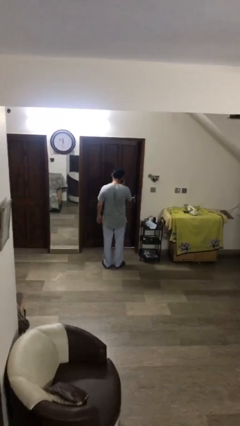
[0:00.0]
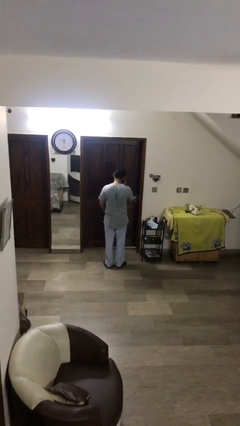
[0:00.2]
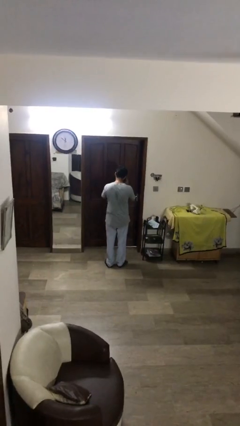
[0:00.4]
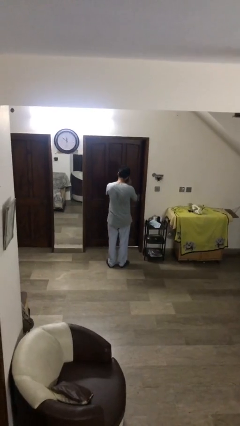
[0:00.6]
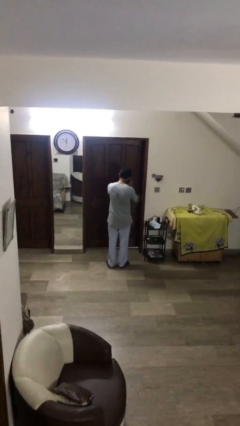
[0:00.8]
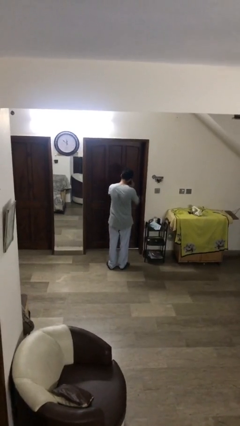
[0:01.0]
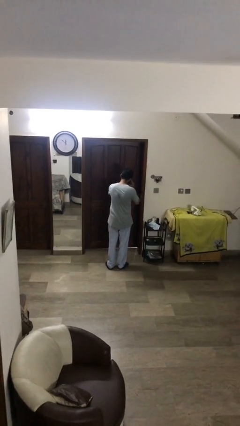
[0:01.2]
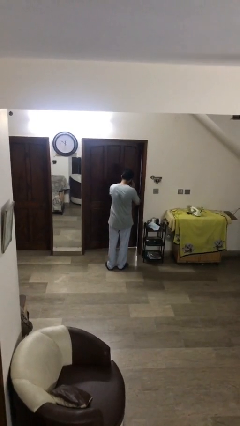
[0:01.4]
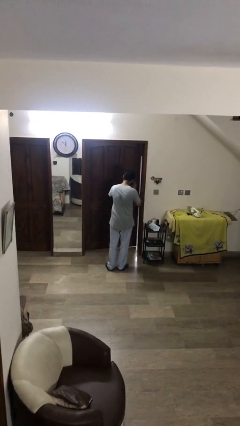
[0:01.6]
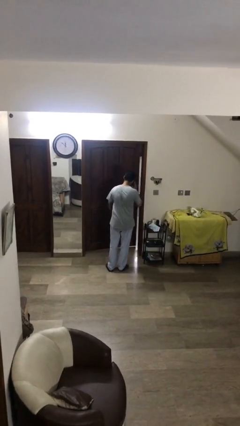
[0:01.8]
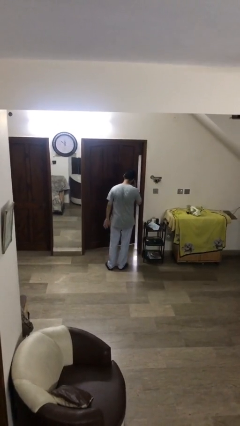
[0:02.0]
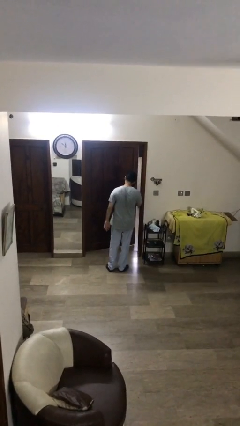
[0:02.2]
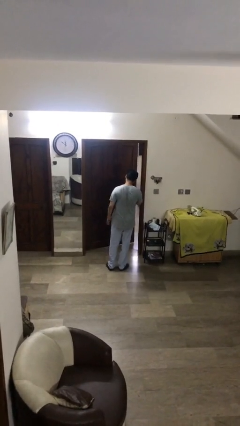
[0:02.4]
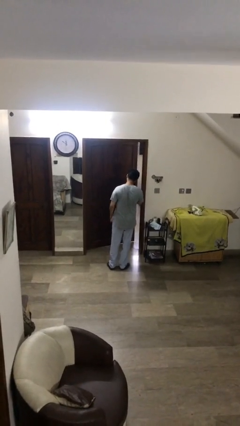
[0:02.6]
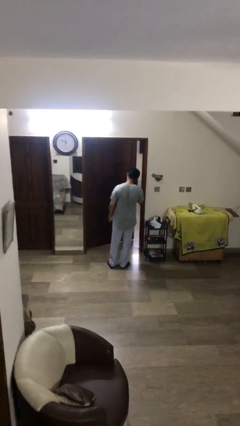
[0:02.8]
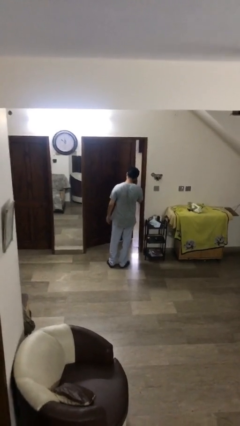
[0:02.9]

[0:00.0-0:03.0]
person opens facility door

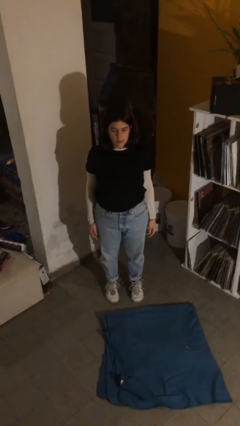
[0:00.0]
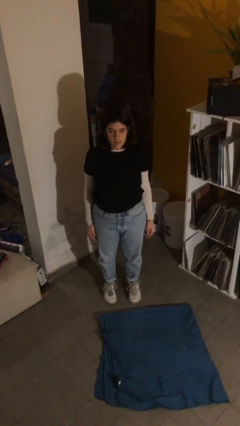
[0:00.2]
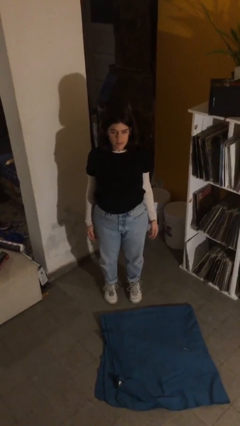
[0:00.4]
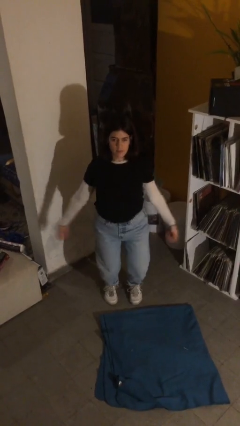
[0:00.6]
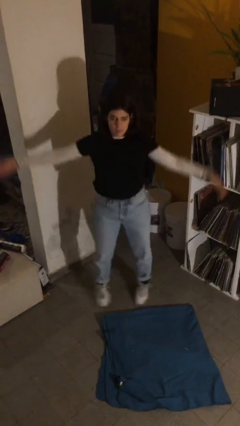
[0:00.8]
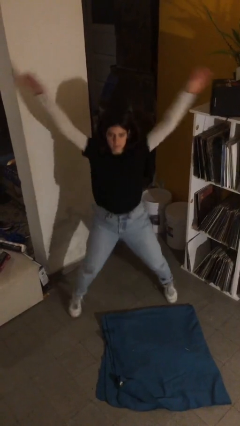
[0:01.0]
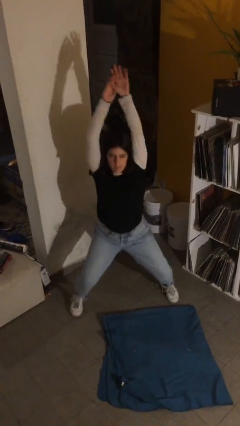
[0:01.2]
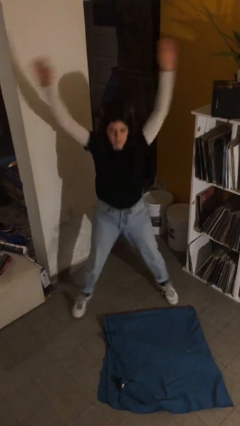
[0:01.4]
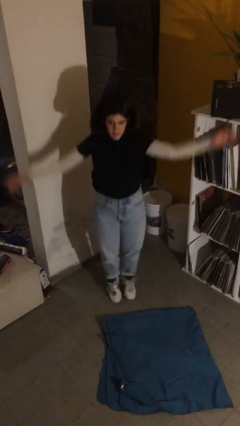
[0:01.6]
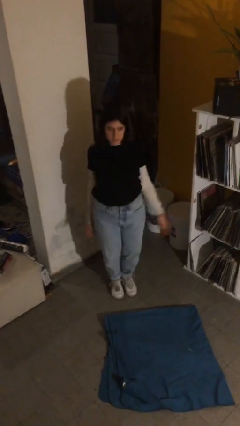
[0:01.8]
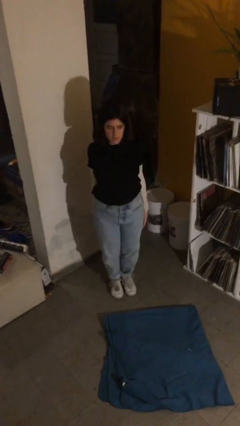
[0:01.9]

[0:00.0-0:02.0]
person exercises with jumping jacks

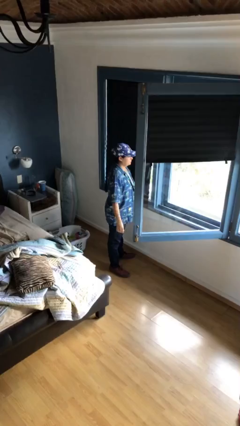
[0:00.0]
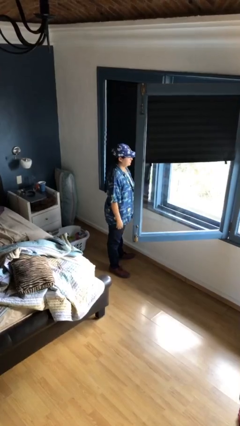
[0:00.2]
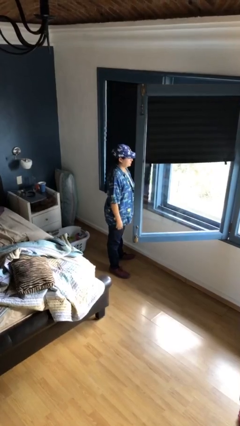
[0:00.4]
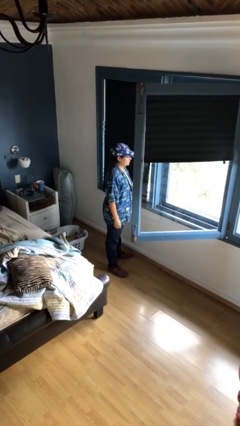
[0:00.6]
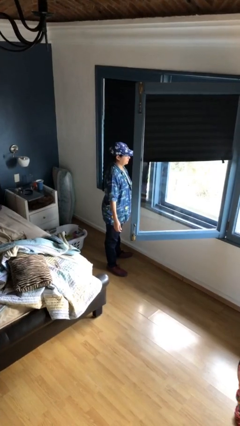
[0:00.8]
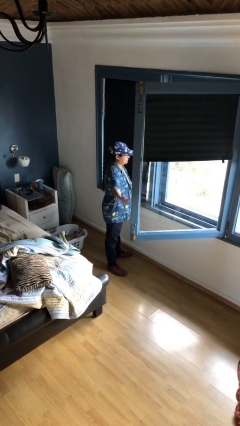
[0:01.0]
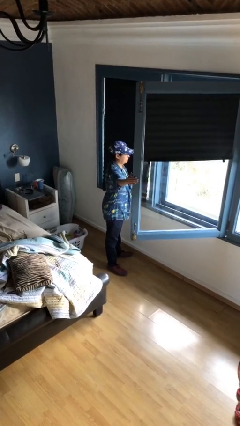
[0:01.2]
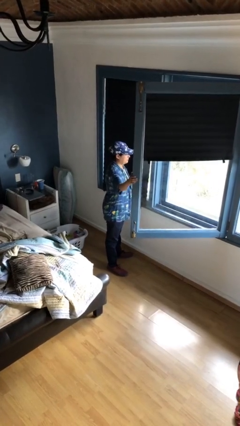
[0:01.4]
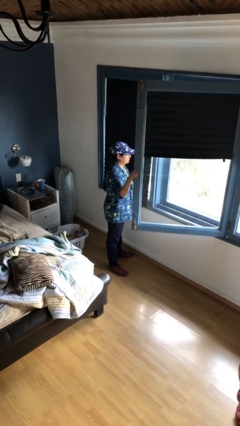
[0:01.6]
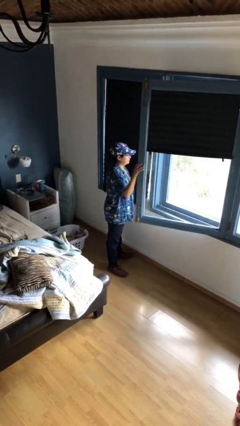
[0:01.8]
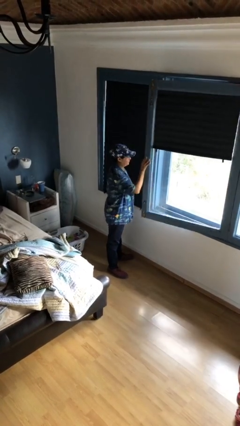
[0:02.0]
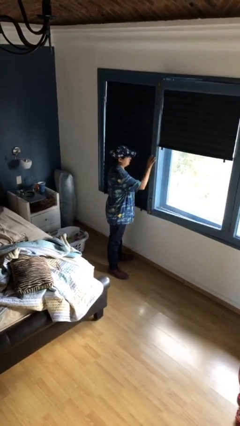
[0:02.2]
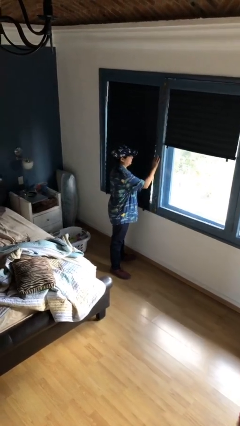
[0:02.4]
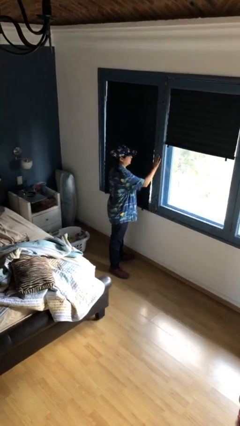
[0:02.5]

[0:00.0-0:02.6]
person closes home window

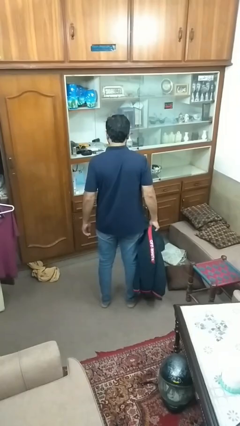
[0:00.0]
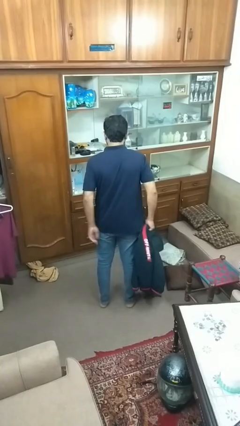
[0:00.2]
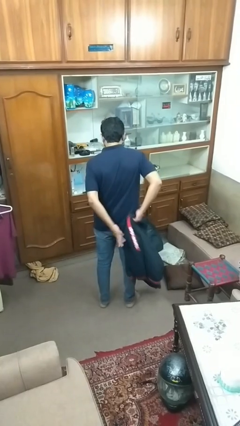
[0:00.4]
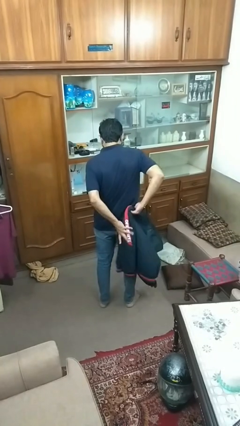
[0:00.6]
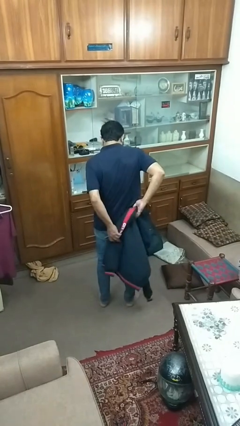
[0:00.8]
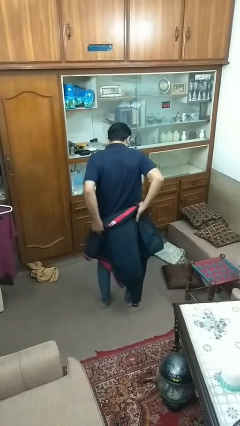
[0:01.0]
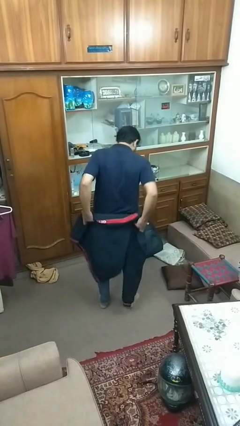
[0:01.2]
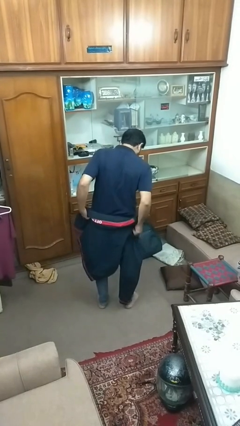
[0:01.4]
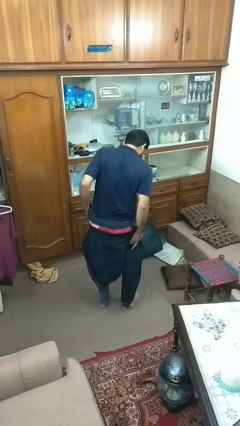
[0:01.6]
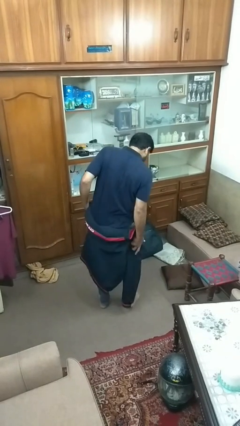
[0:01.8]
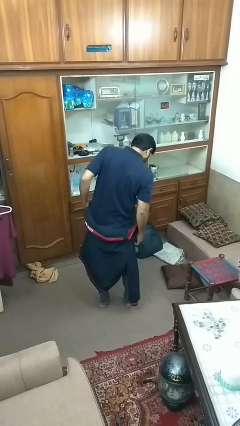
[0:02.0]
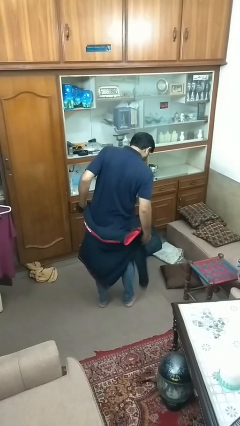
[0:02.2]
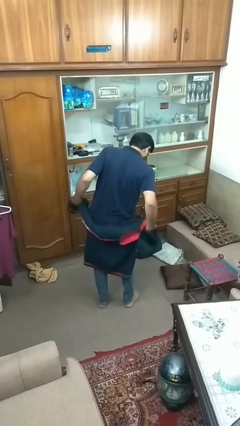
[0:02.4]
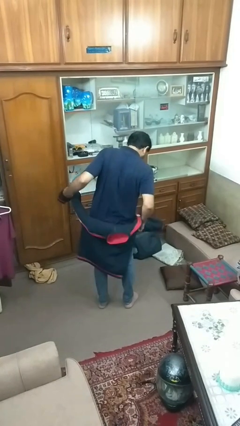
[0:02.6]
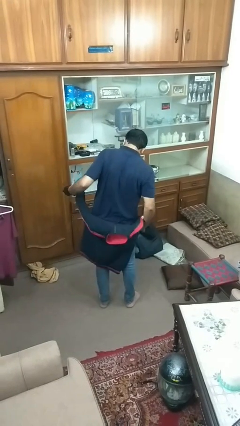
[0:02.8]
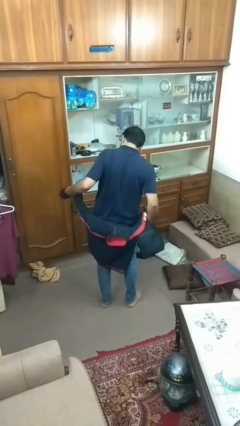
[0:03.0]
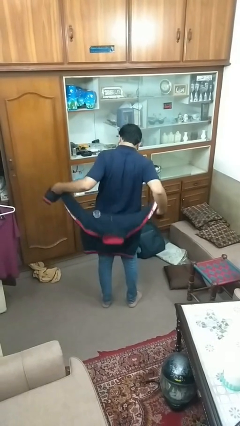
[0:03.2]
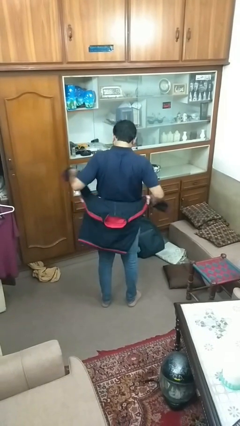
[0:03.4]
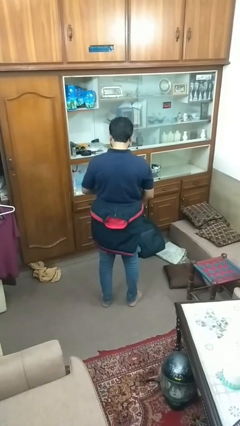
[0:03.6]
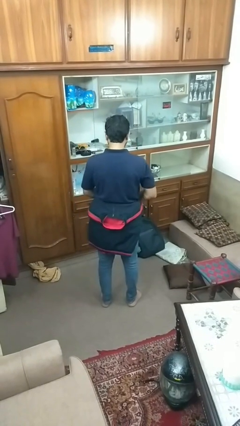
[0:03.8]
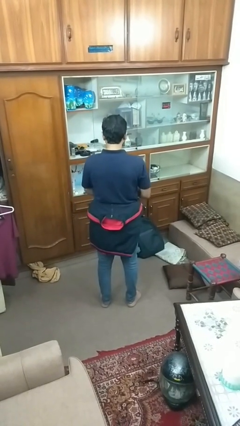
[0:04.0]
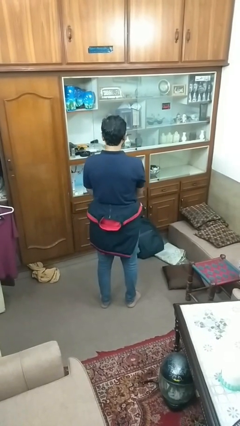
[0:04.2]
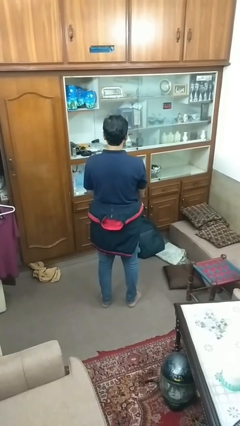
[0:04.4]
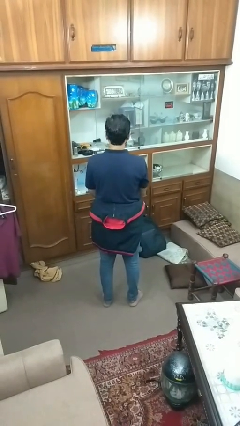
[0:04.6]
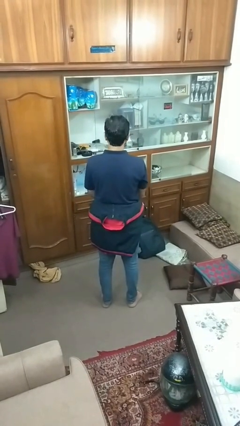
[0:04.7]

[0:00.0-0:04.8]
person ties jacket around waist

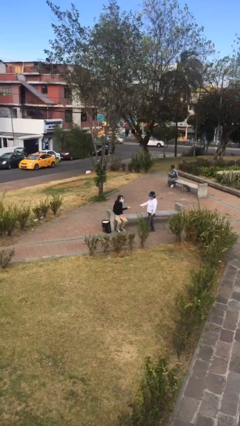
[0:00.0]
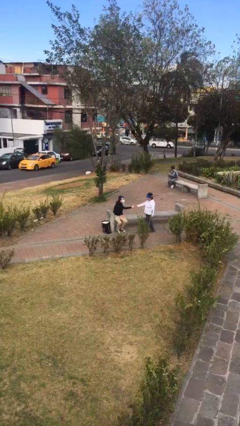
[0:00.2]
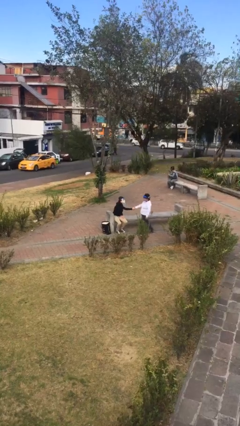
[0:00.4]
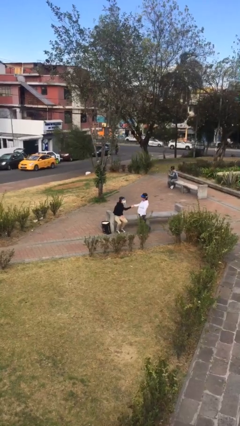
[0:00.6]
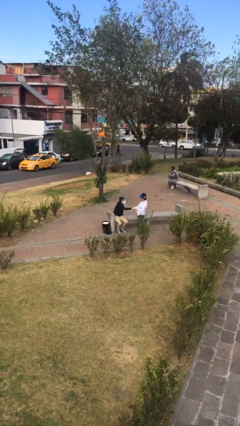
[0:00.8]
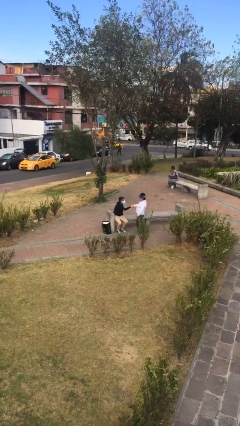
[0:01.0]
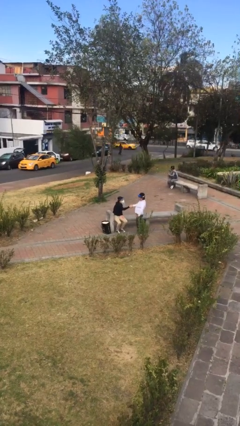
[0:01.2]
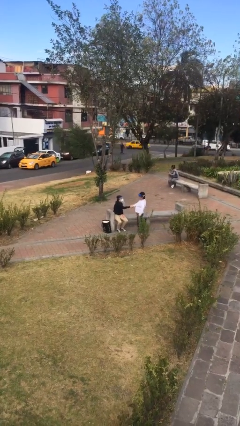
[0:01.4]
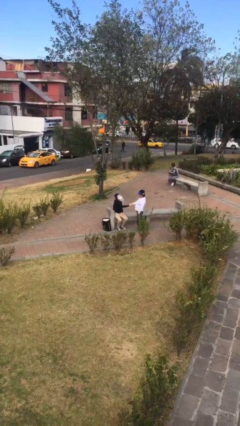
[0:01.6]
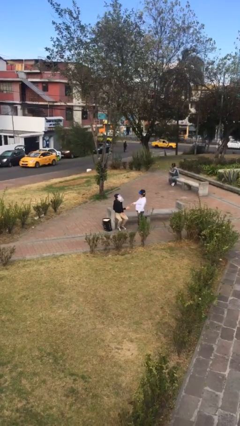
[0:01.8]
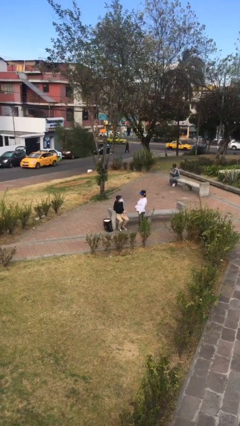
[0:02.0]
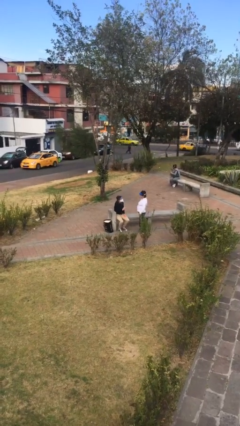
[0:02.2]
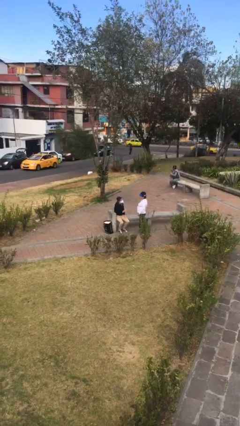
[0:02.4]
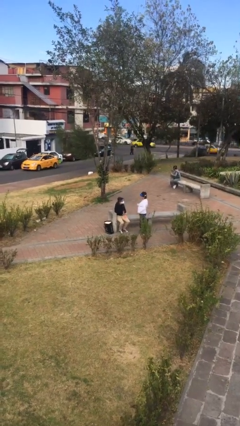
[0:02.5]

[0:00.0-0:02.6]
person shakes hand

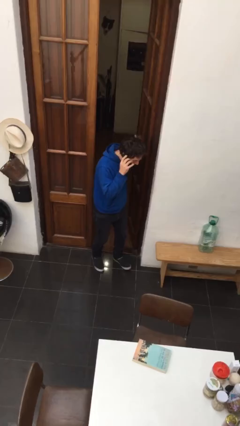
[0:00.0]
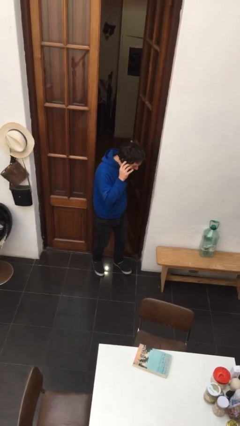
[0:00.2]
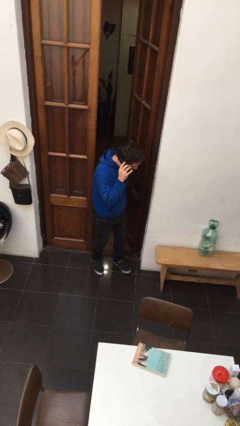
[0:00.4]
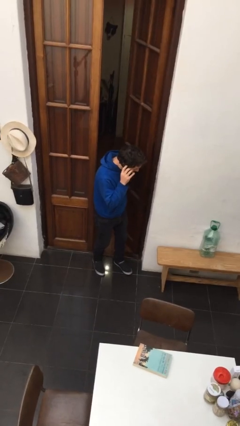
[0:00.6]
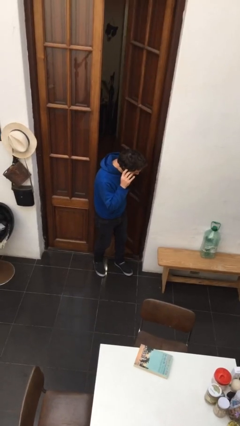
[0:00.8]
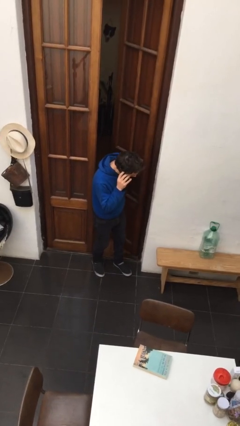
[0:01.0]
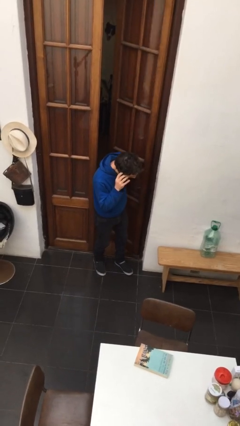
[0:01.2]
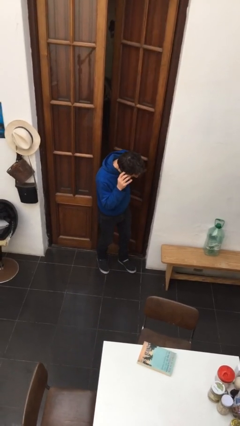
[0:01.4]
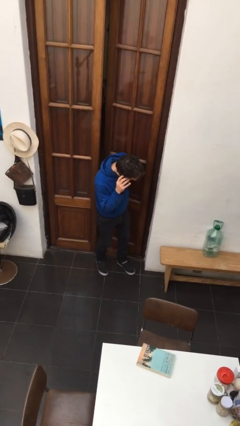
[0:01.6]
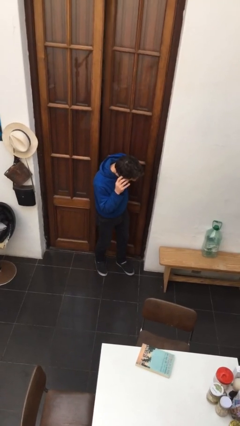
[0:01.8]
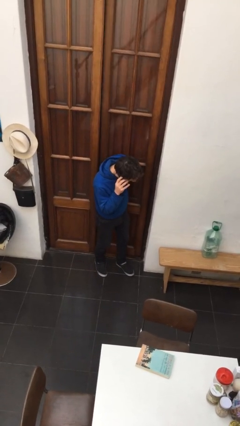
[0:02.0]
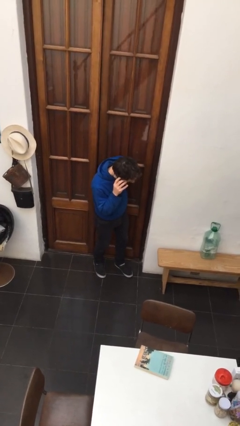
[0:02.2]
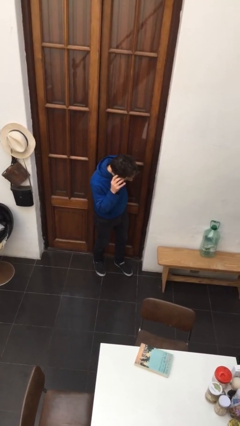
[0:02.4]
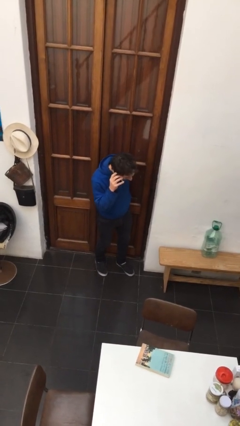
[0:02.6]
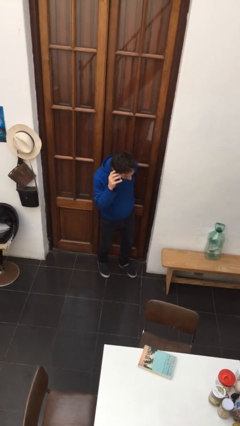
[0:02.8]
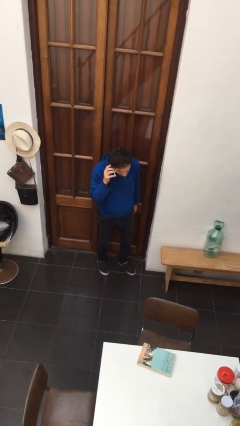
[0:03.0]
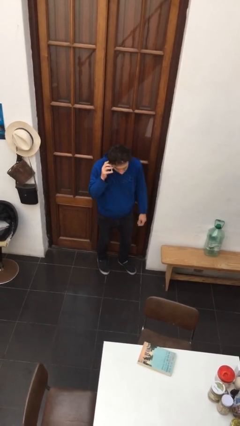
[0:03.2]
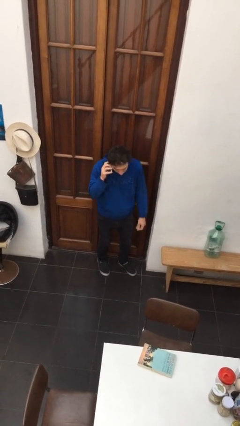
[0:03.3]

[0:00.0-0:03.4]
person closes facility door
